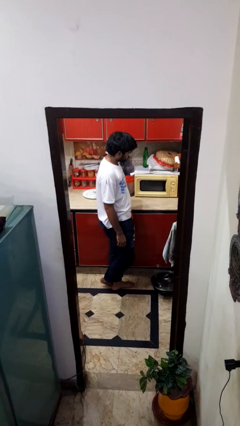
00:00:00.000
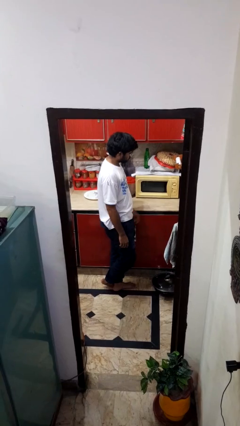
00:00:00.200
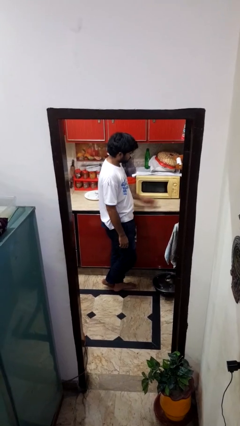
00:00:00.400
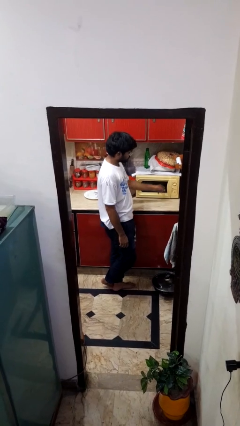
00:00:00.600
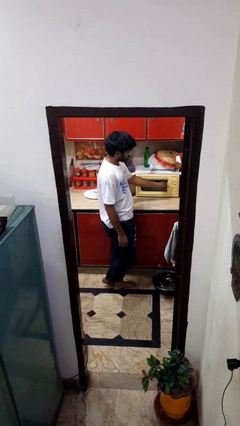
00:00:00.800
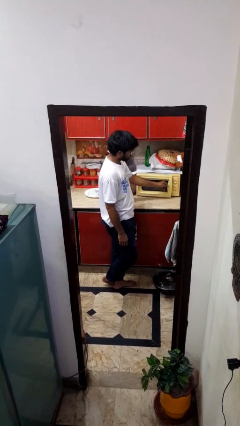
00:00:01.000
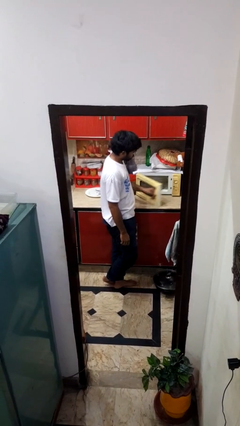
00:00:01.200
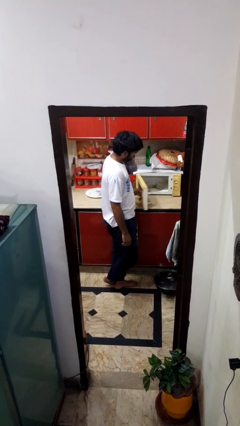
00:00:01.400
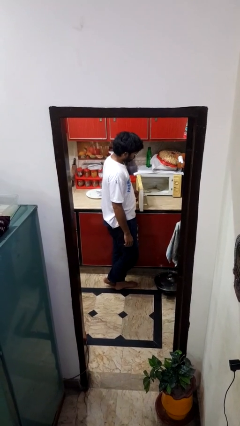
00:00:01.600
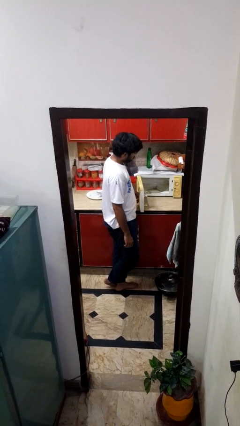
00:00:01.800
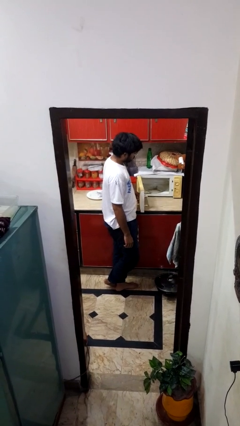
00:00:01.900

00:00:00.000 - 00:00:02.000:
person opens oven door

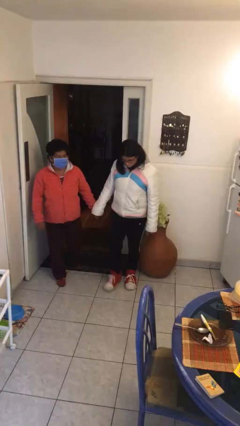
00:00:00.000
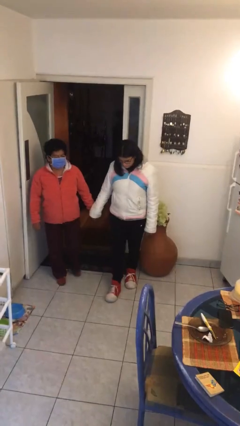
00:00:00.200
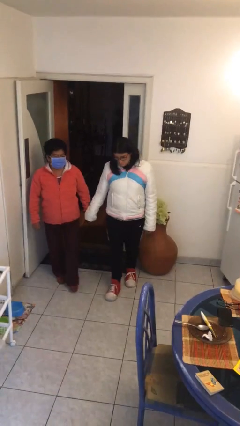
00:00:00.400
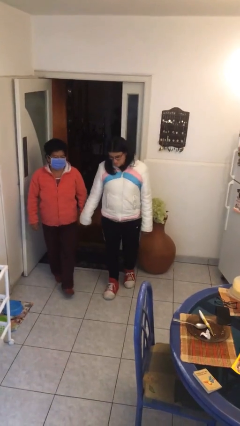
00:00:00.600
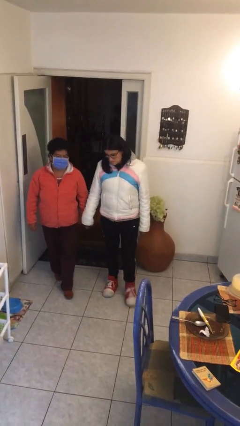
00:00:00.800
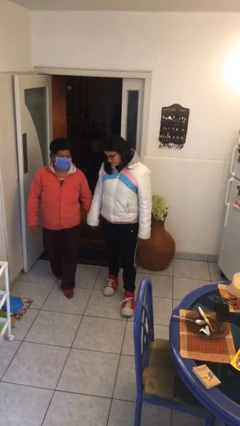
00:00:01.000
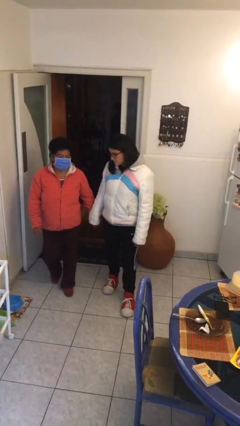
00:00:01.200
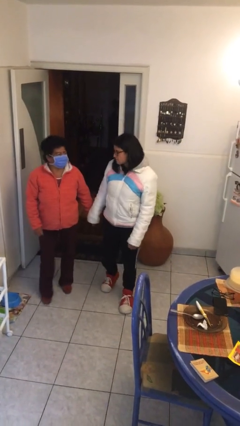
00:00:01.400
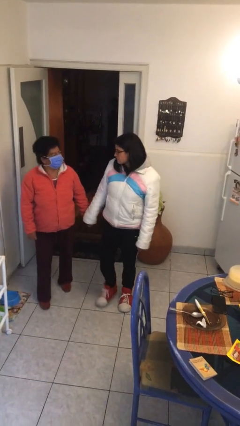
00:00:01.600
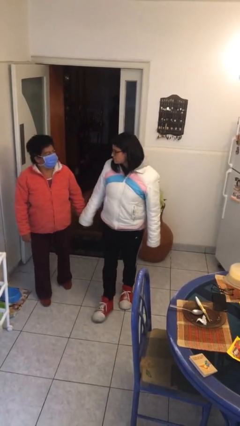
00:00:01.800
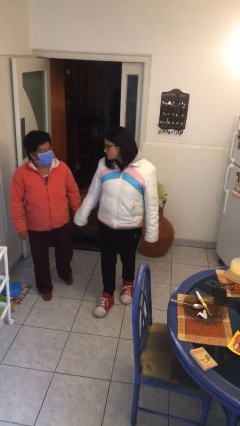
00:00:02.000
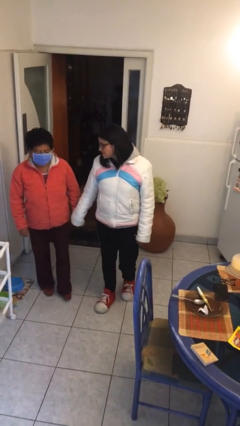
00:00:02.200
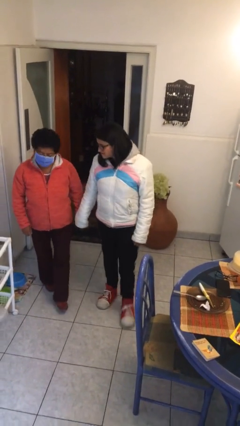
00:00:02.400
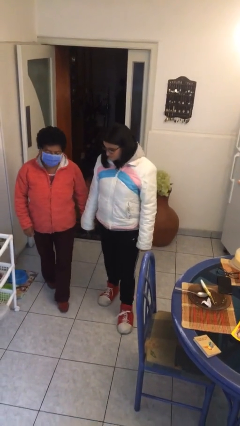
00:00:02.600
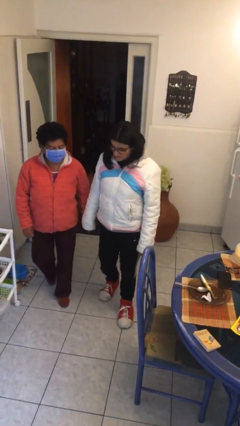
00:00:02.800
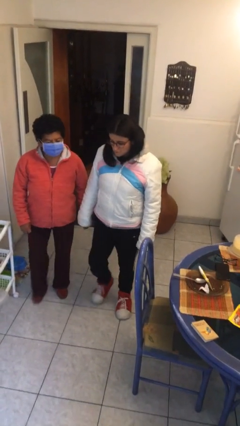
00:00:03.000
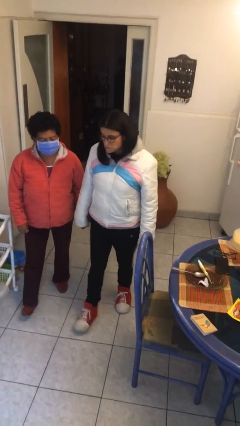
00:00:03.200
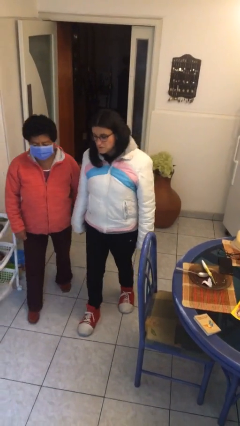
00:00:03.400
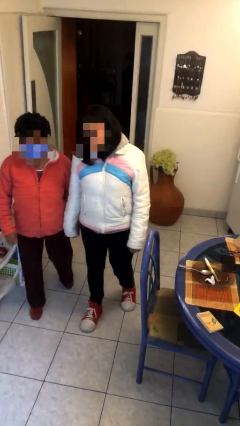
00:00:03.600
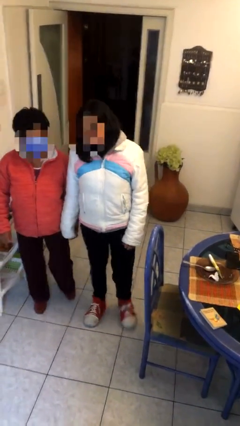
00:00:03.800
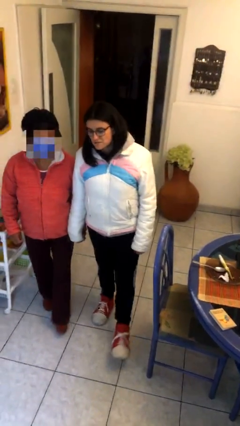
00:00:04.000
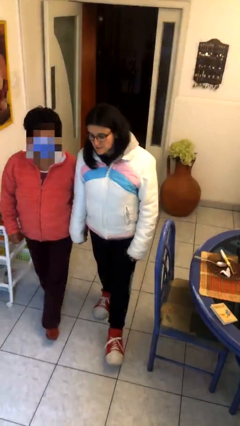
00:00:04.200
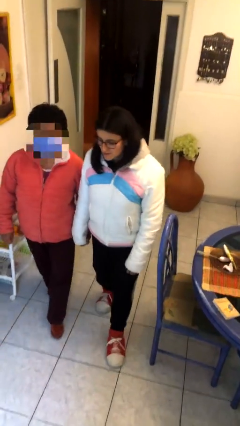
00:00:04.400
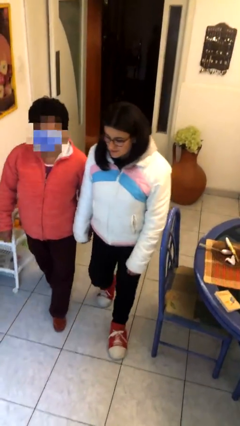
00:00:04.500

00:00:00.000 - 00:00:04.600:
person holds hand

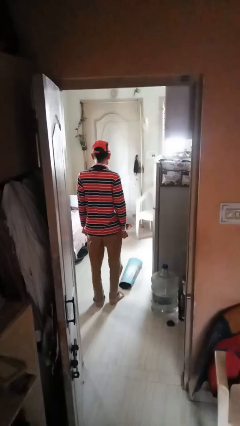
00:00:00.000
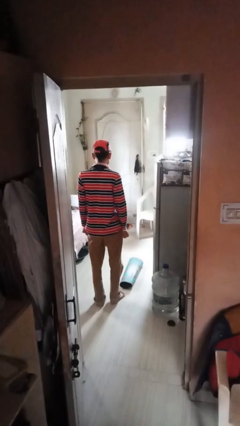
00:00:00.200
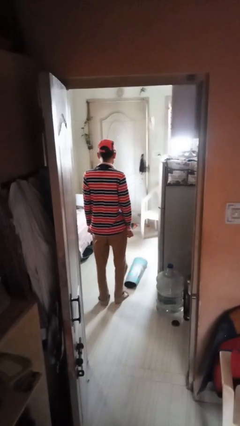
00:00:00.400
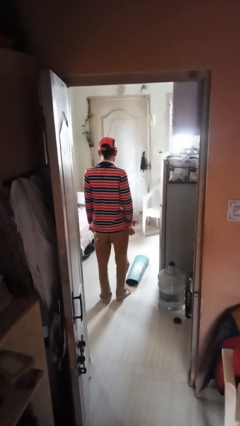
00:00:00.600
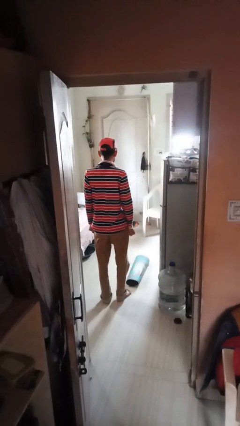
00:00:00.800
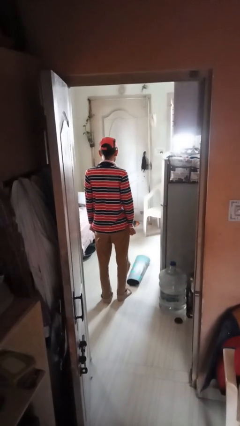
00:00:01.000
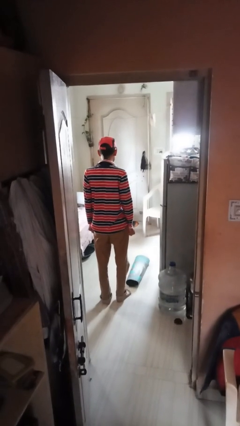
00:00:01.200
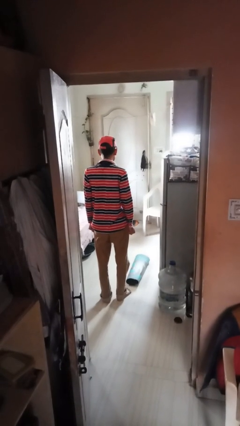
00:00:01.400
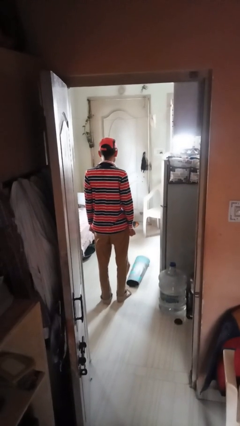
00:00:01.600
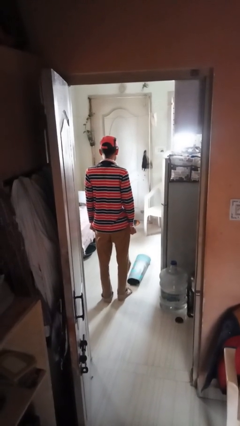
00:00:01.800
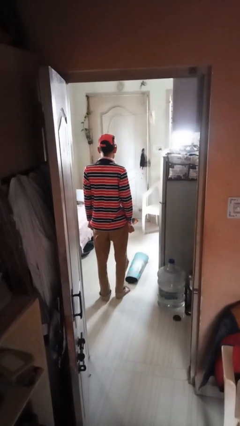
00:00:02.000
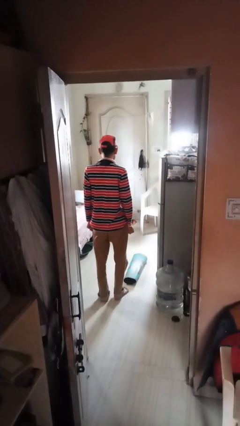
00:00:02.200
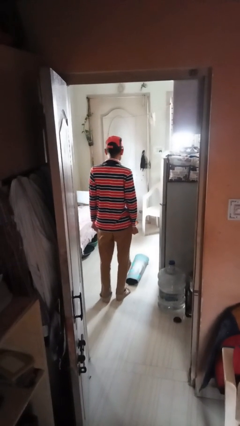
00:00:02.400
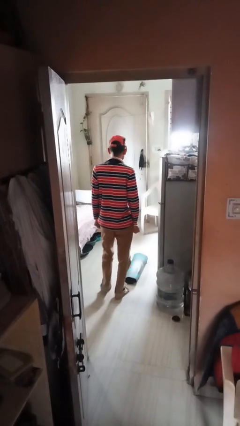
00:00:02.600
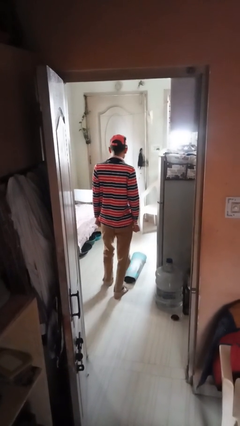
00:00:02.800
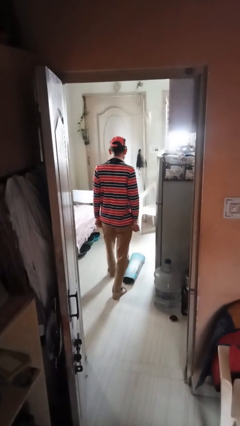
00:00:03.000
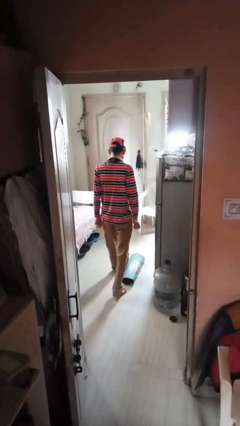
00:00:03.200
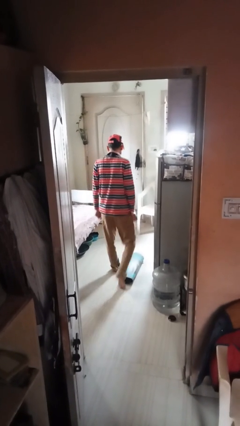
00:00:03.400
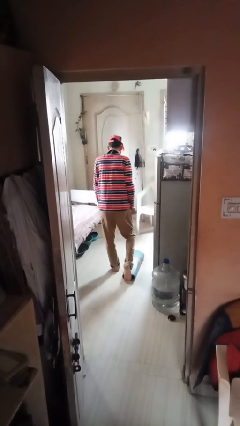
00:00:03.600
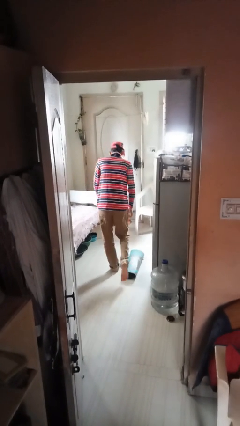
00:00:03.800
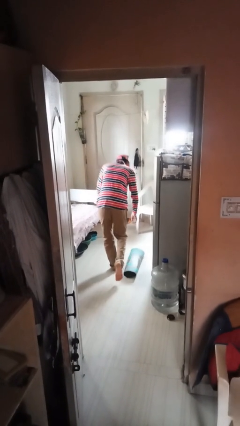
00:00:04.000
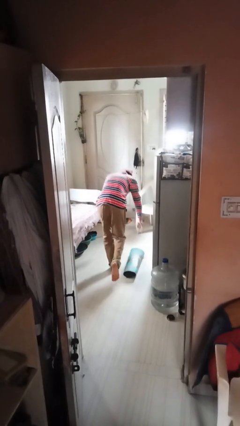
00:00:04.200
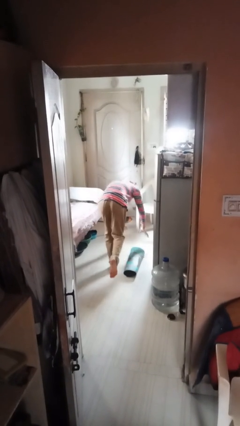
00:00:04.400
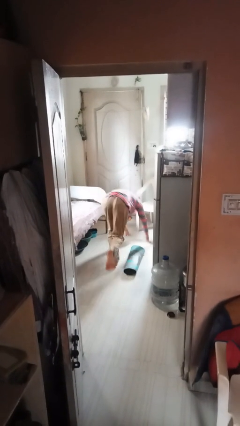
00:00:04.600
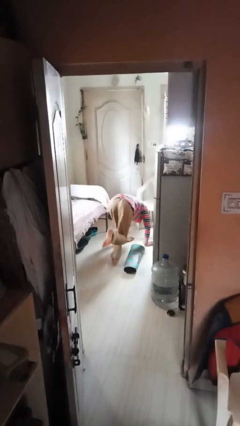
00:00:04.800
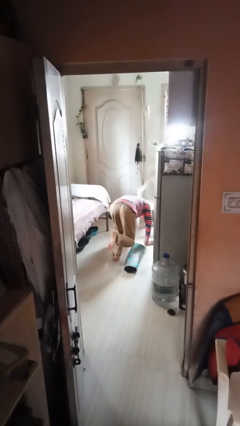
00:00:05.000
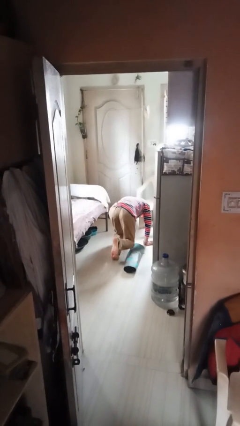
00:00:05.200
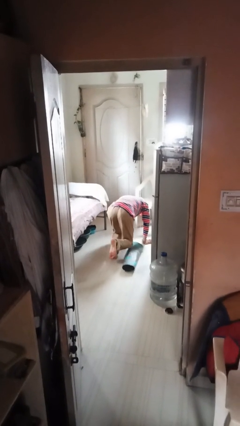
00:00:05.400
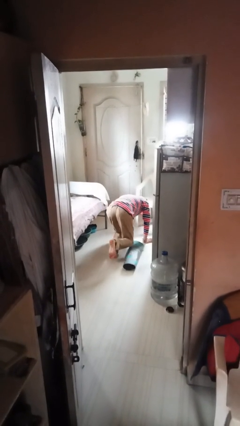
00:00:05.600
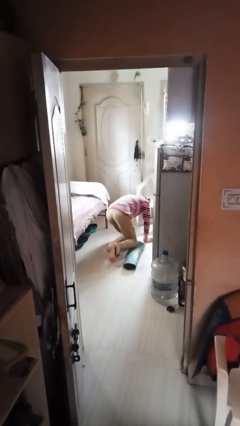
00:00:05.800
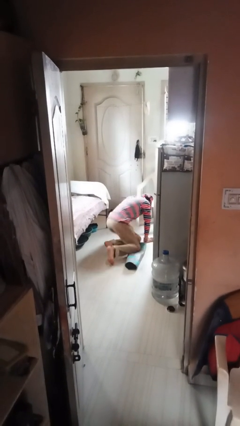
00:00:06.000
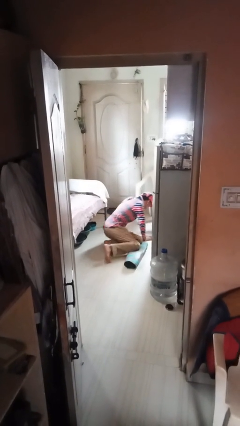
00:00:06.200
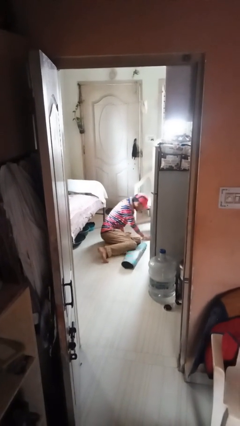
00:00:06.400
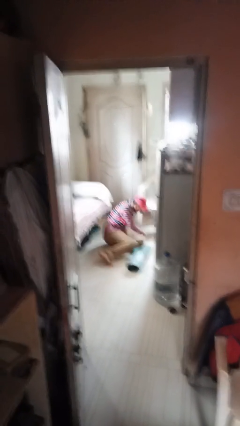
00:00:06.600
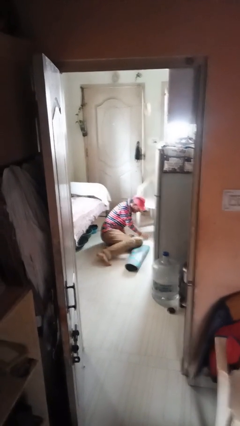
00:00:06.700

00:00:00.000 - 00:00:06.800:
person trips on object on floor

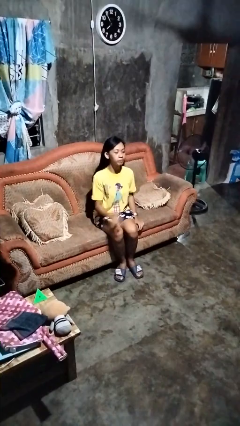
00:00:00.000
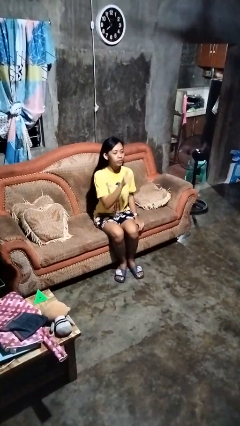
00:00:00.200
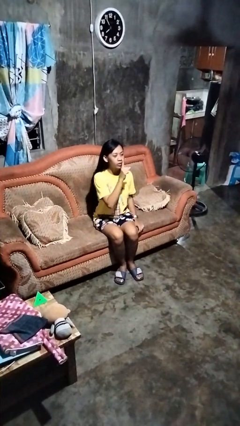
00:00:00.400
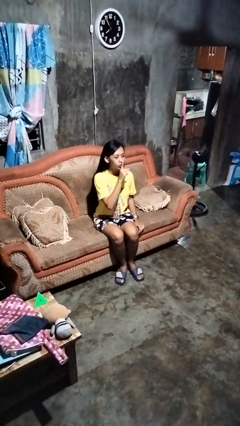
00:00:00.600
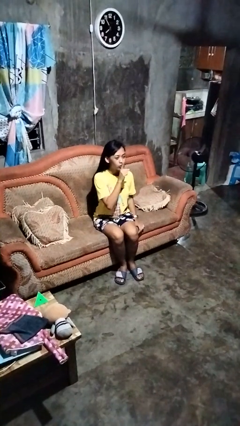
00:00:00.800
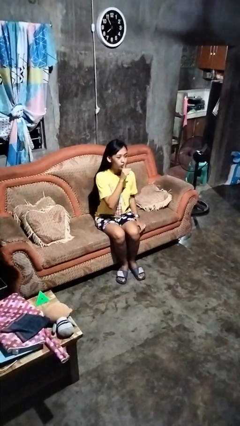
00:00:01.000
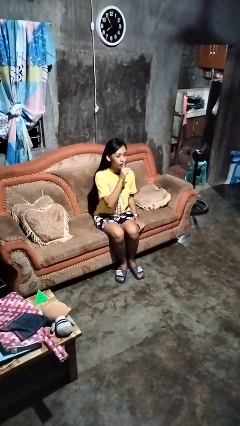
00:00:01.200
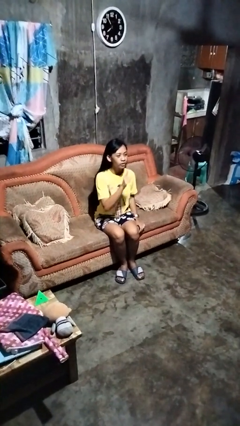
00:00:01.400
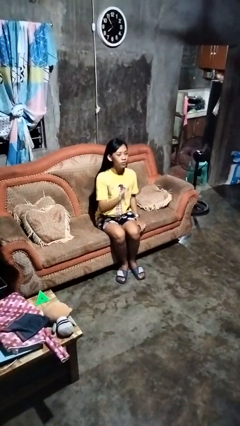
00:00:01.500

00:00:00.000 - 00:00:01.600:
person gestures be quiet

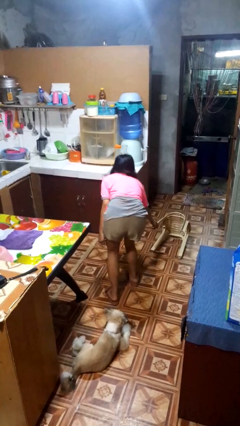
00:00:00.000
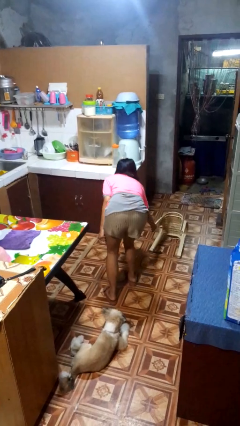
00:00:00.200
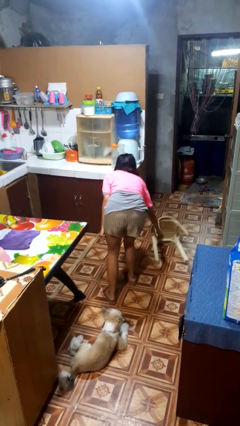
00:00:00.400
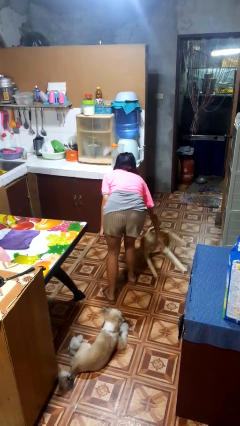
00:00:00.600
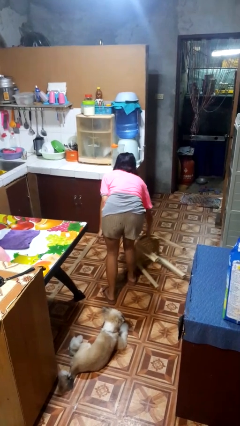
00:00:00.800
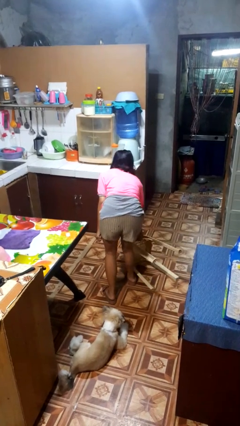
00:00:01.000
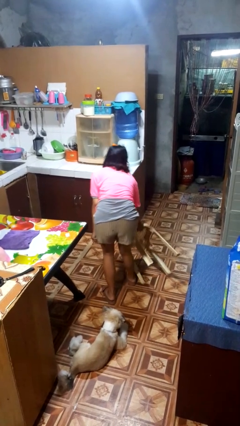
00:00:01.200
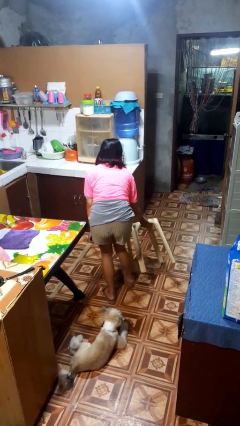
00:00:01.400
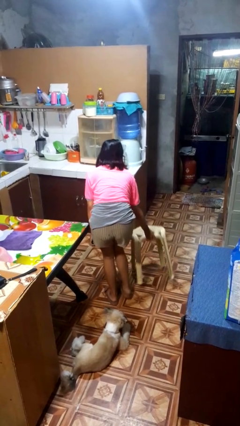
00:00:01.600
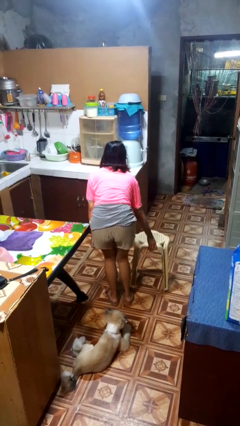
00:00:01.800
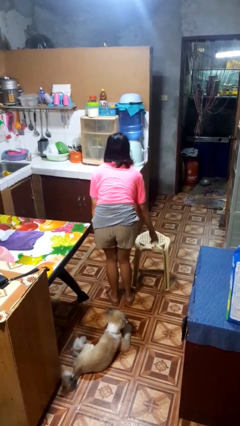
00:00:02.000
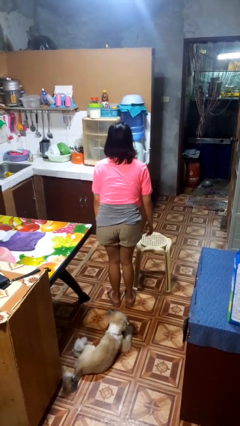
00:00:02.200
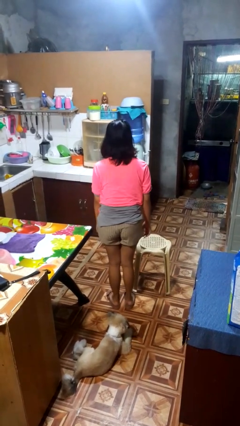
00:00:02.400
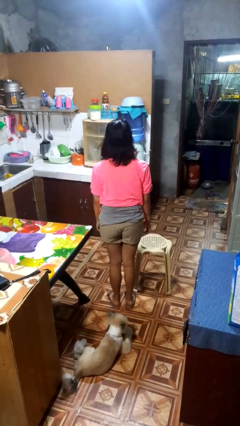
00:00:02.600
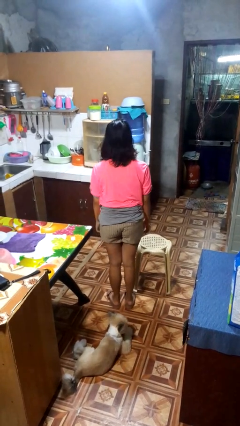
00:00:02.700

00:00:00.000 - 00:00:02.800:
person sets upright furniture
